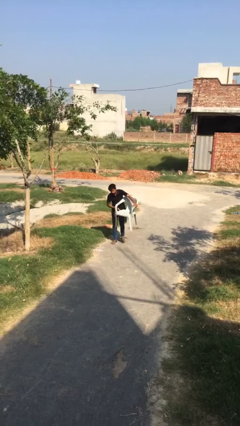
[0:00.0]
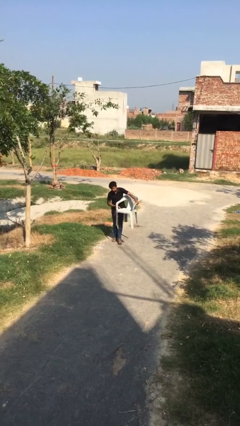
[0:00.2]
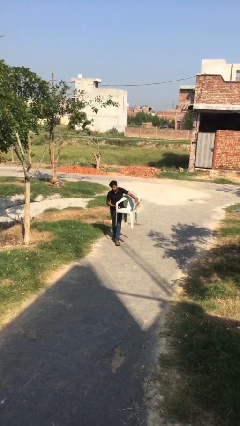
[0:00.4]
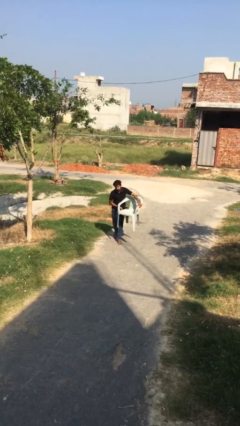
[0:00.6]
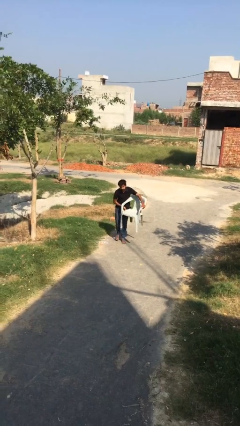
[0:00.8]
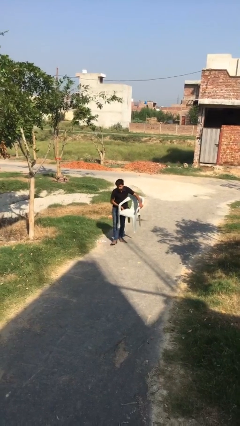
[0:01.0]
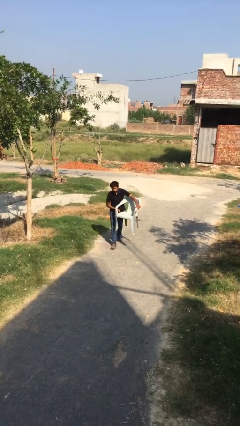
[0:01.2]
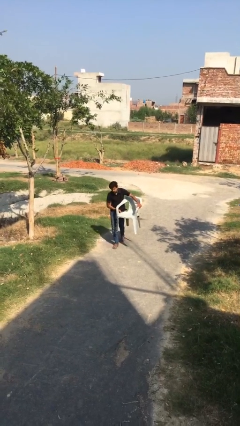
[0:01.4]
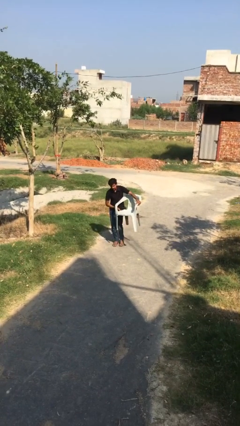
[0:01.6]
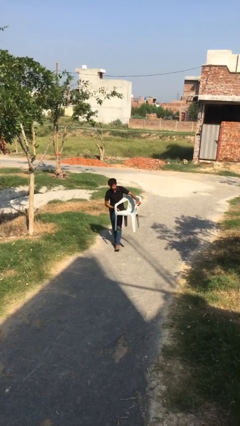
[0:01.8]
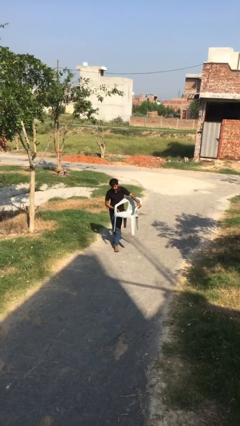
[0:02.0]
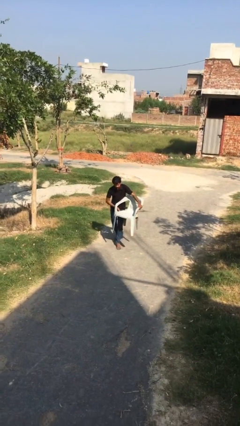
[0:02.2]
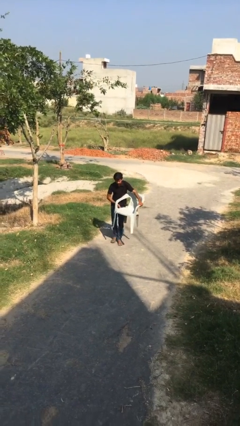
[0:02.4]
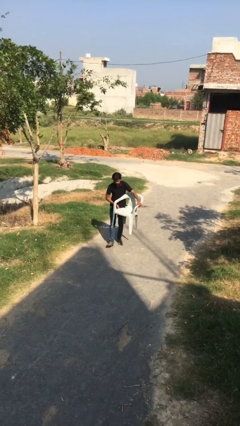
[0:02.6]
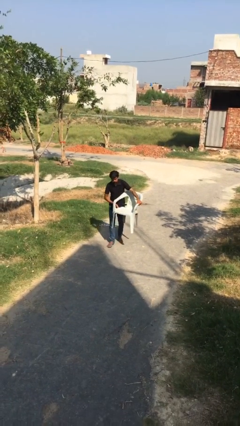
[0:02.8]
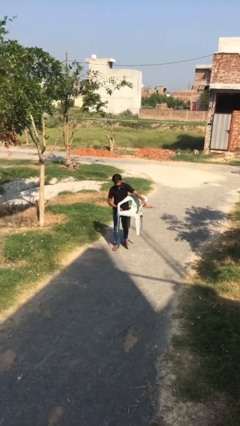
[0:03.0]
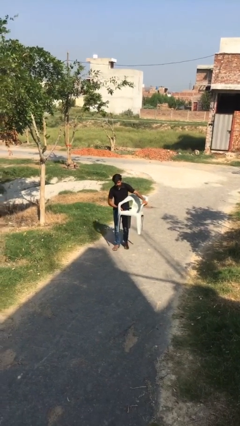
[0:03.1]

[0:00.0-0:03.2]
person carries heavy object

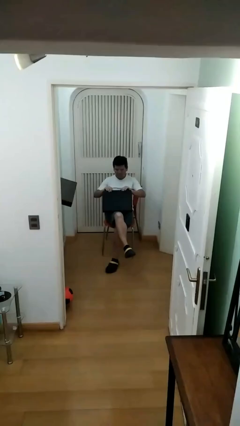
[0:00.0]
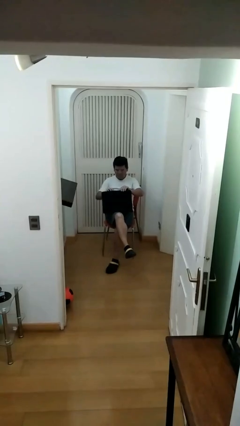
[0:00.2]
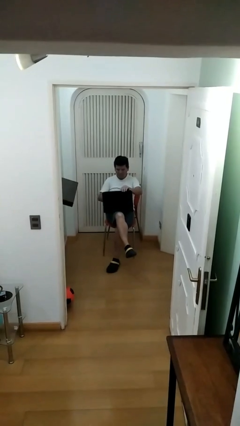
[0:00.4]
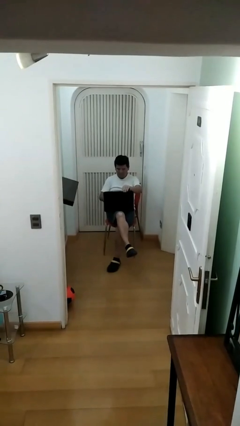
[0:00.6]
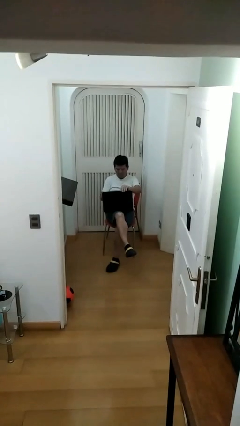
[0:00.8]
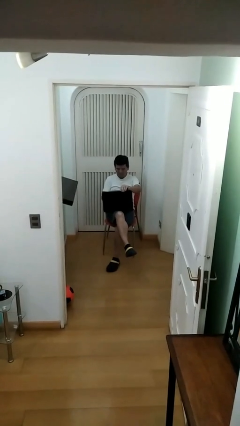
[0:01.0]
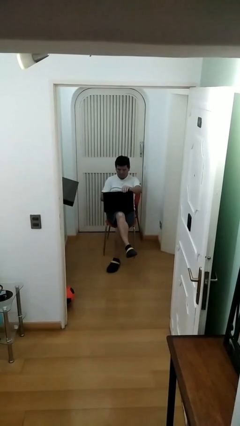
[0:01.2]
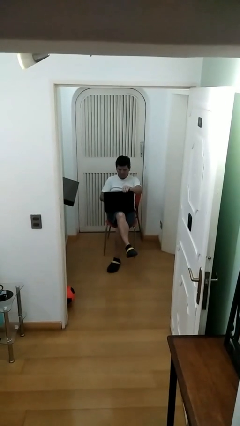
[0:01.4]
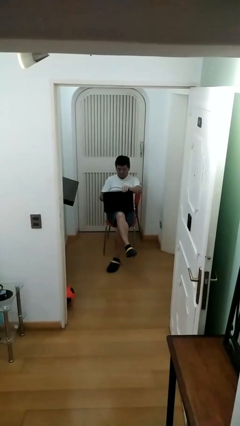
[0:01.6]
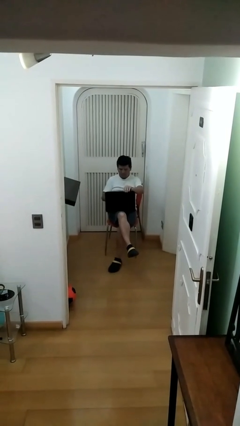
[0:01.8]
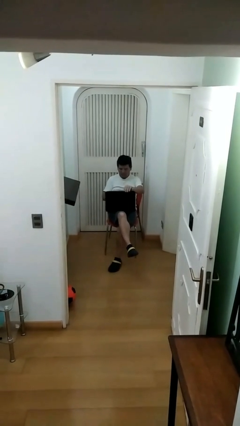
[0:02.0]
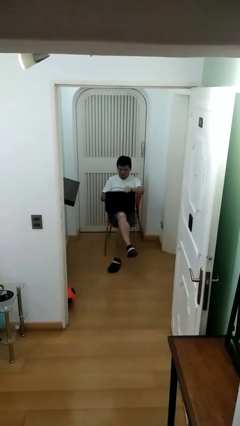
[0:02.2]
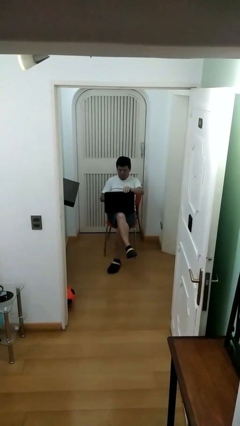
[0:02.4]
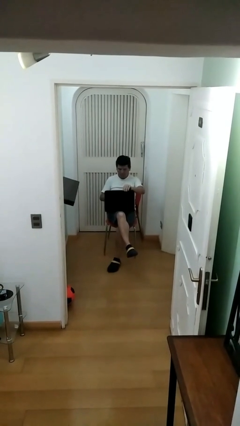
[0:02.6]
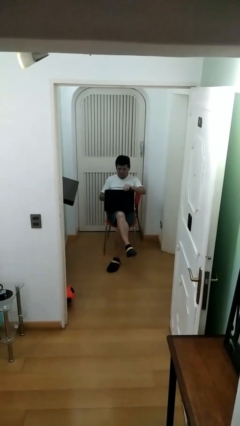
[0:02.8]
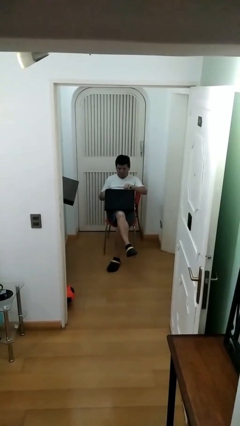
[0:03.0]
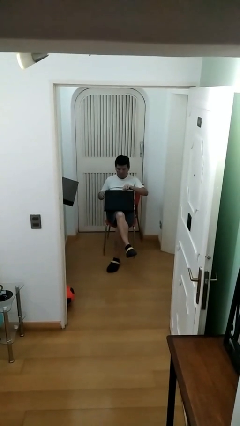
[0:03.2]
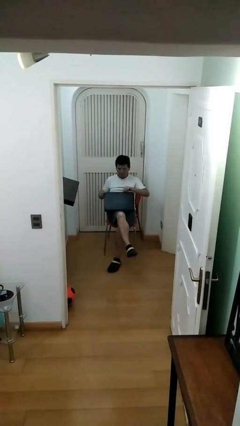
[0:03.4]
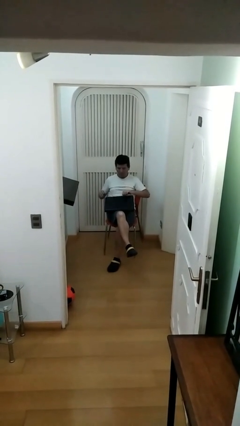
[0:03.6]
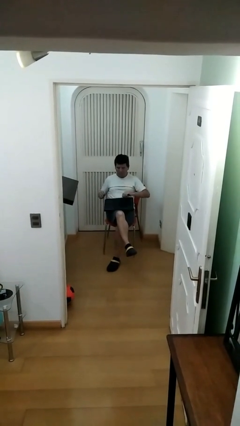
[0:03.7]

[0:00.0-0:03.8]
person interacts with laptop

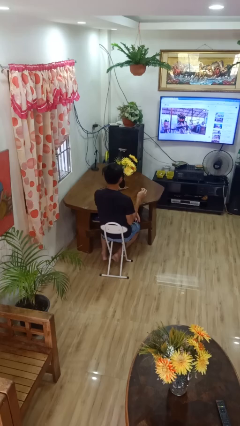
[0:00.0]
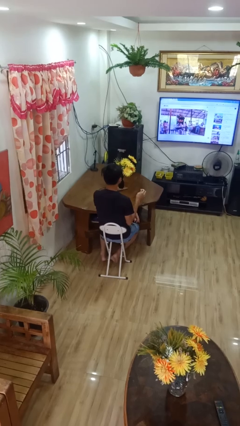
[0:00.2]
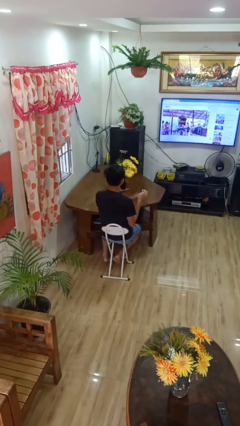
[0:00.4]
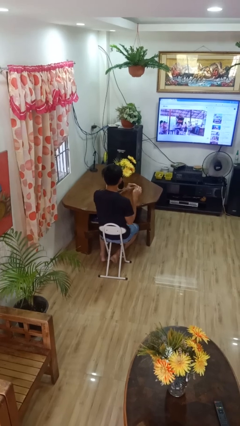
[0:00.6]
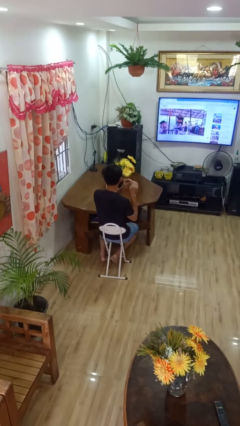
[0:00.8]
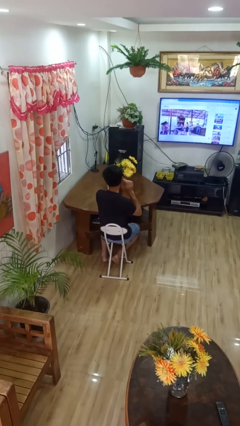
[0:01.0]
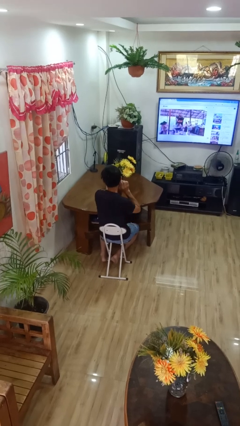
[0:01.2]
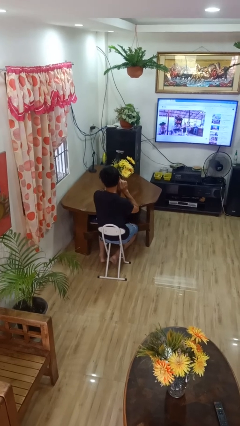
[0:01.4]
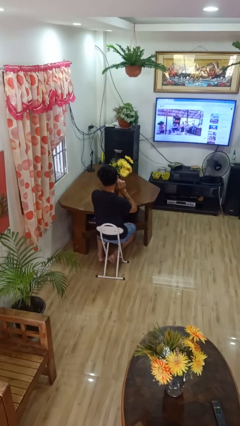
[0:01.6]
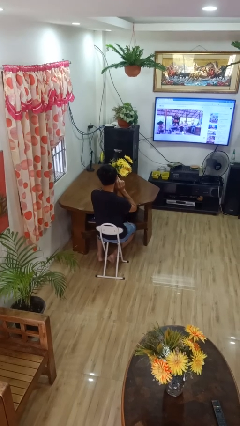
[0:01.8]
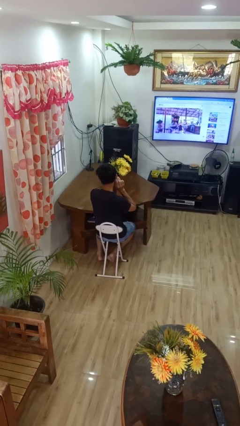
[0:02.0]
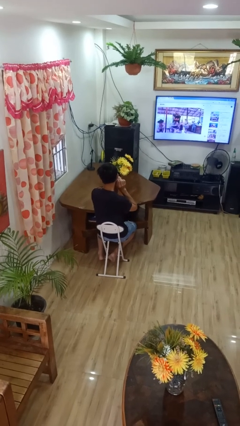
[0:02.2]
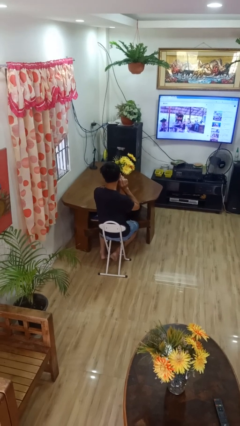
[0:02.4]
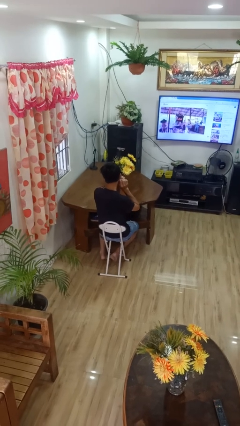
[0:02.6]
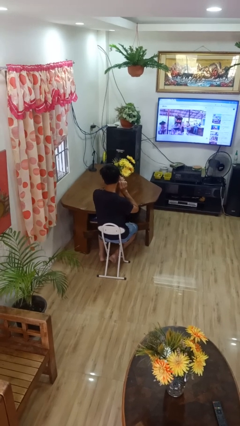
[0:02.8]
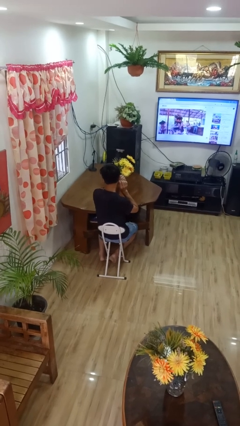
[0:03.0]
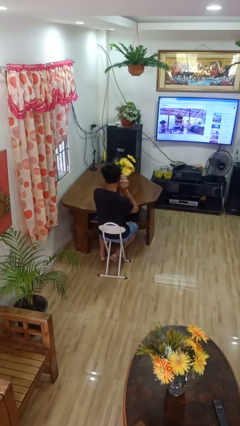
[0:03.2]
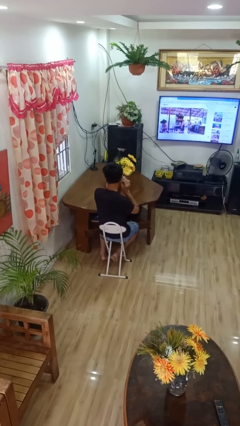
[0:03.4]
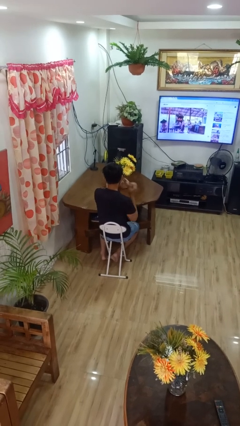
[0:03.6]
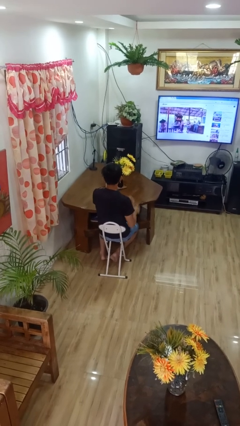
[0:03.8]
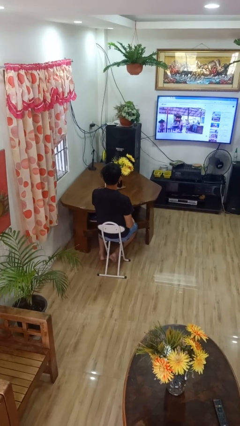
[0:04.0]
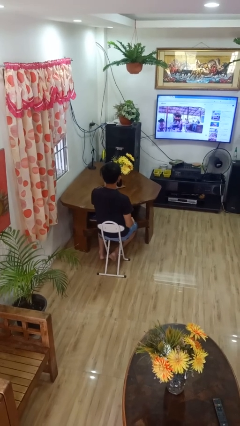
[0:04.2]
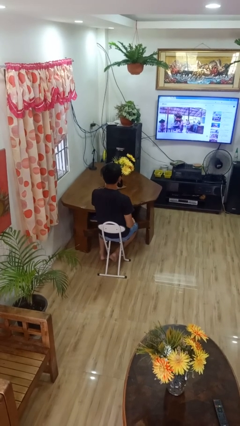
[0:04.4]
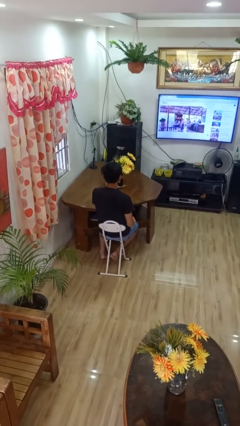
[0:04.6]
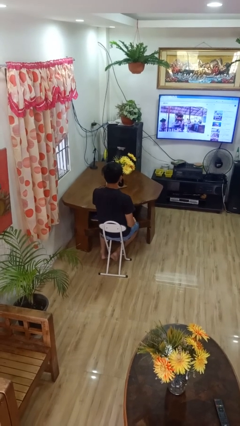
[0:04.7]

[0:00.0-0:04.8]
person puts on earrings

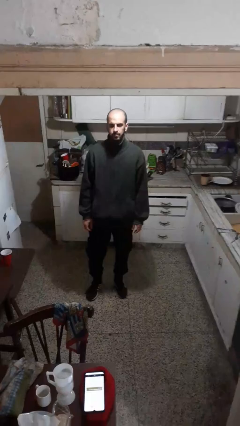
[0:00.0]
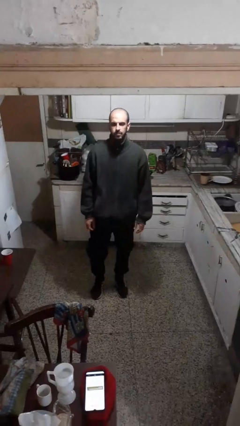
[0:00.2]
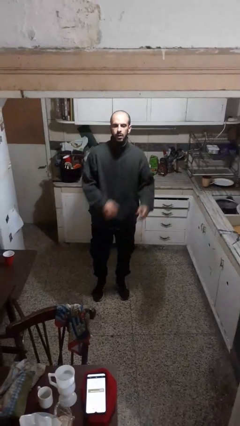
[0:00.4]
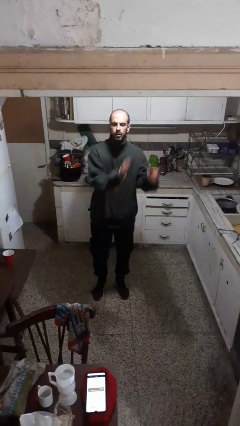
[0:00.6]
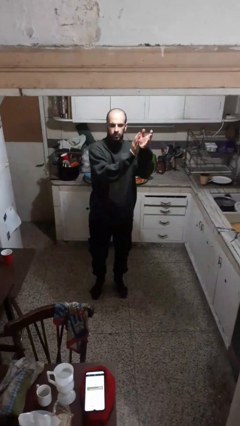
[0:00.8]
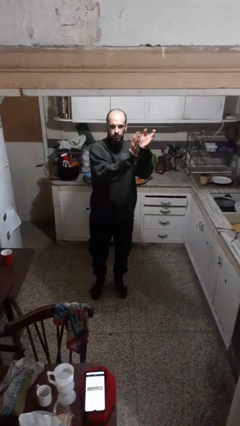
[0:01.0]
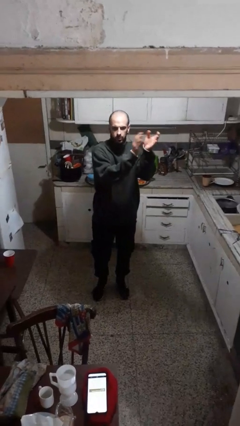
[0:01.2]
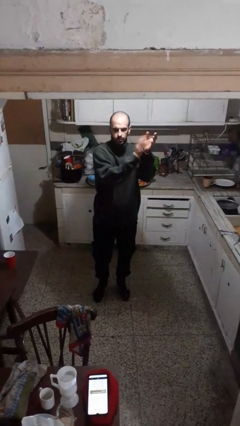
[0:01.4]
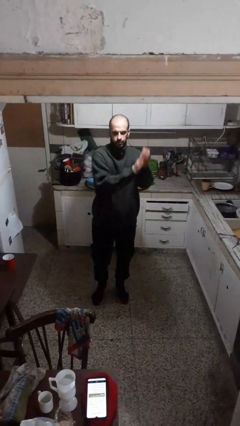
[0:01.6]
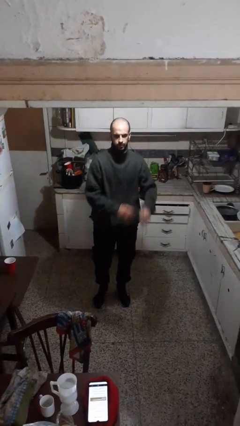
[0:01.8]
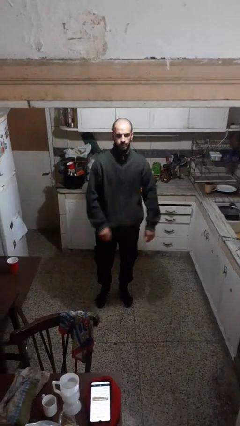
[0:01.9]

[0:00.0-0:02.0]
person claps hands

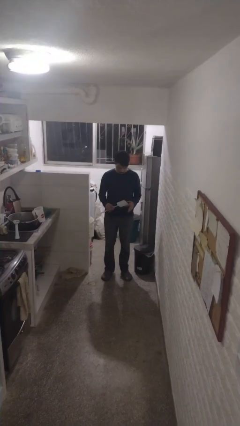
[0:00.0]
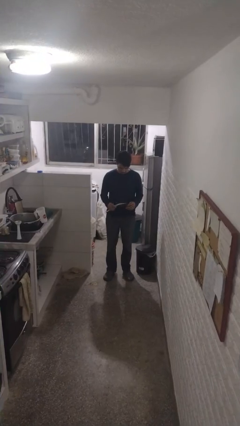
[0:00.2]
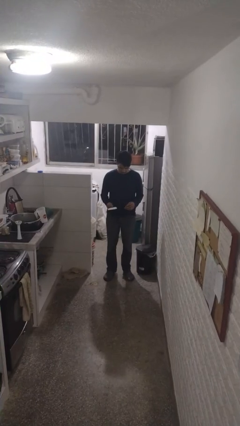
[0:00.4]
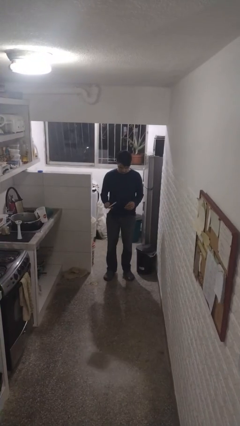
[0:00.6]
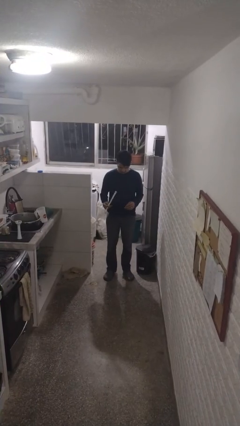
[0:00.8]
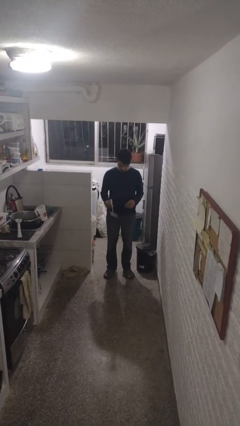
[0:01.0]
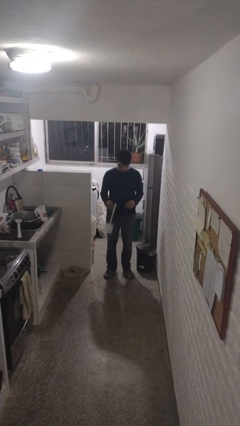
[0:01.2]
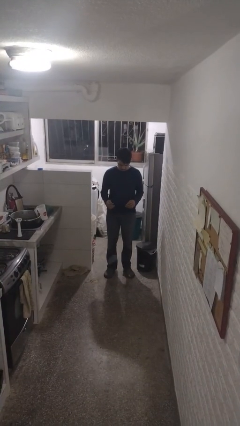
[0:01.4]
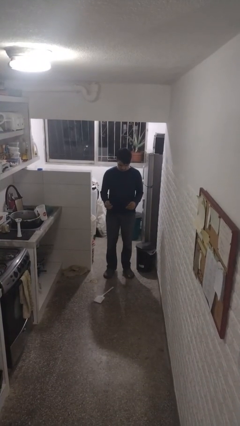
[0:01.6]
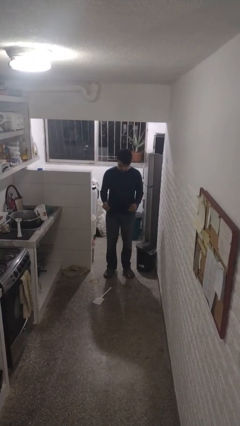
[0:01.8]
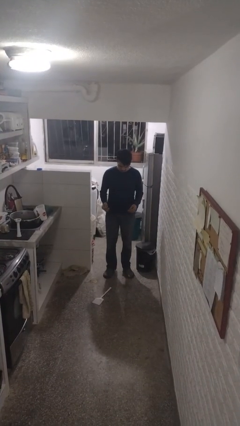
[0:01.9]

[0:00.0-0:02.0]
person drops object

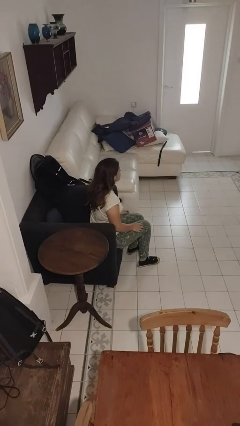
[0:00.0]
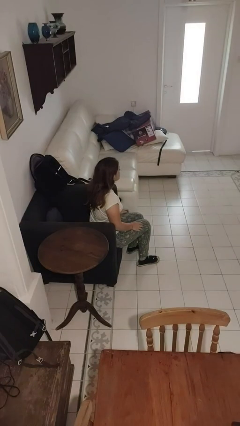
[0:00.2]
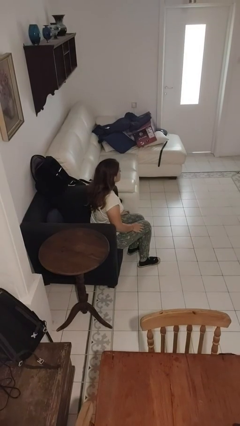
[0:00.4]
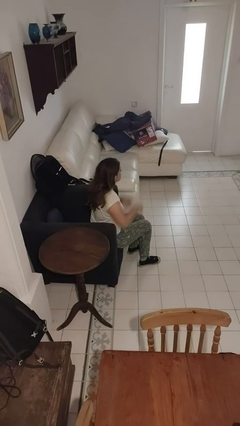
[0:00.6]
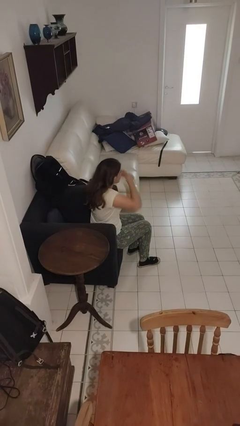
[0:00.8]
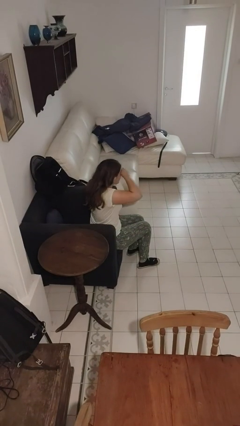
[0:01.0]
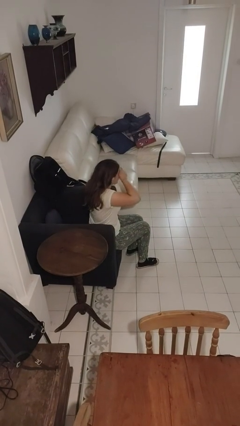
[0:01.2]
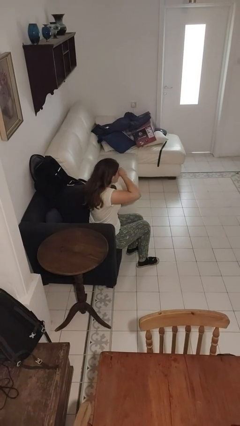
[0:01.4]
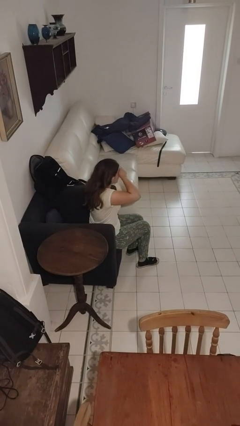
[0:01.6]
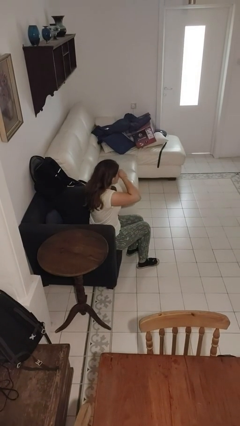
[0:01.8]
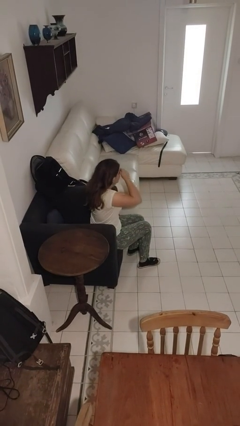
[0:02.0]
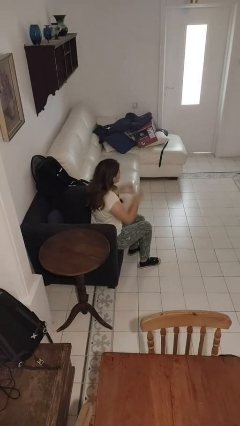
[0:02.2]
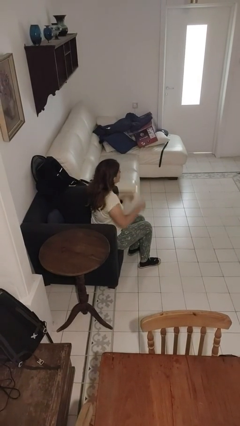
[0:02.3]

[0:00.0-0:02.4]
person rubs eyes
